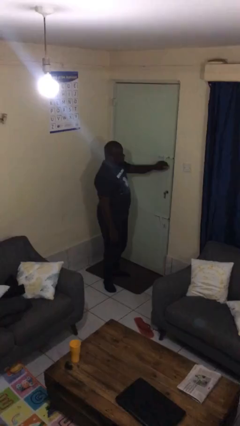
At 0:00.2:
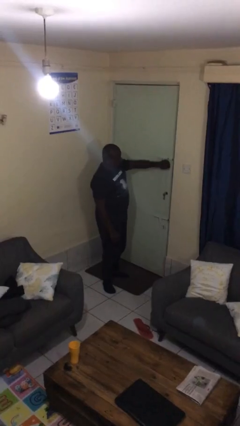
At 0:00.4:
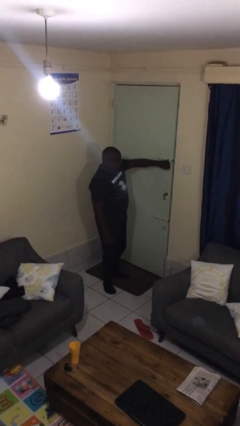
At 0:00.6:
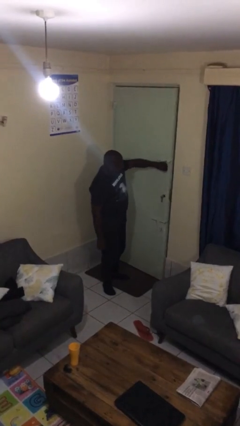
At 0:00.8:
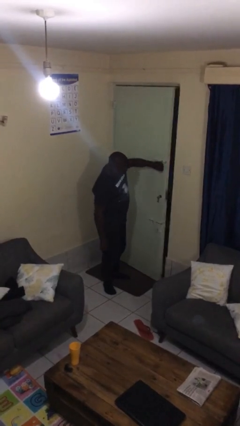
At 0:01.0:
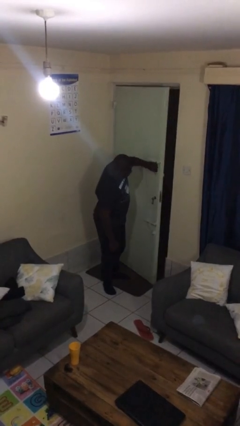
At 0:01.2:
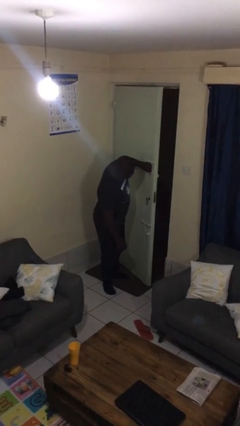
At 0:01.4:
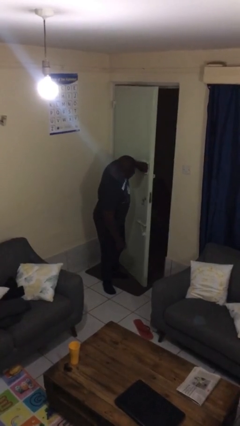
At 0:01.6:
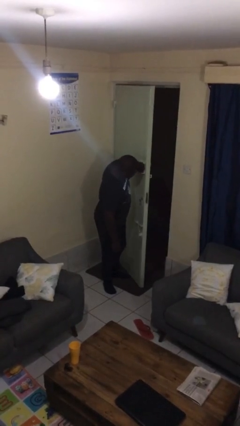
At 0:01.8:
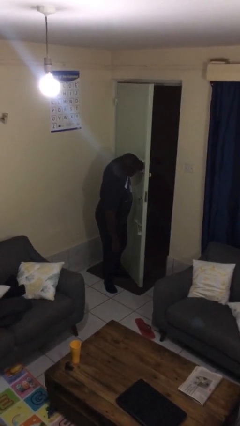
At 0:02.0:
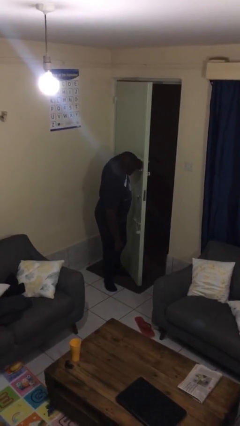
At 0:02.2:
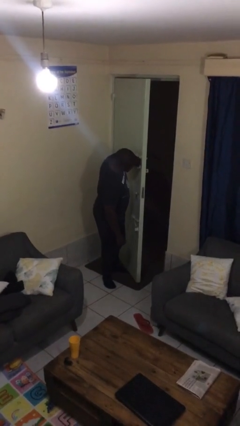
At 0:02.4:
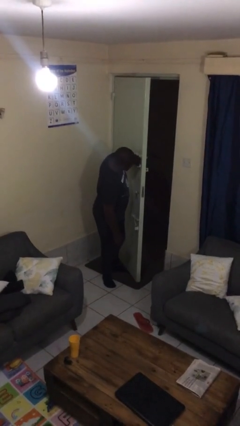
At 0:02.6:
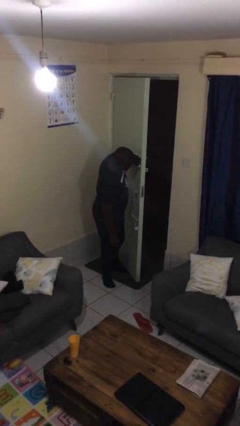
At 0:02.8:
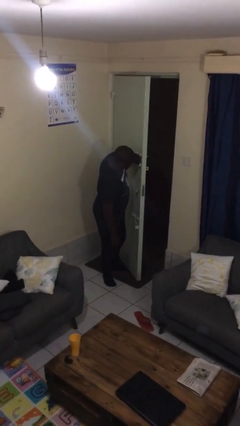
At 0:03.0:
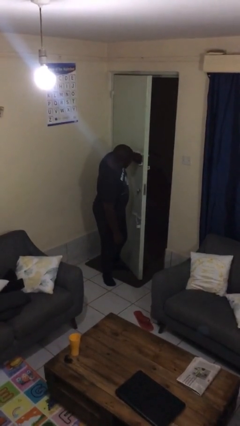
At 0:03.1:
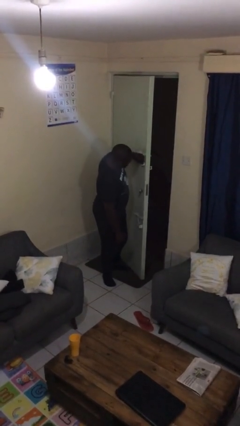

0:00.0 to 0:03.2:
person opens facility door

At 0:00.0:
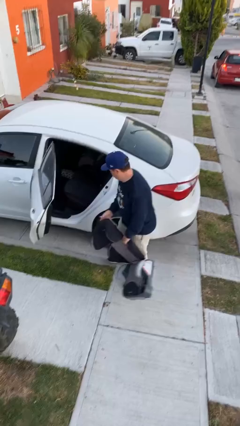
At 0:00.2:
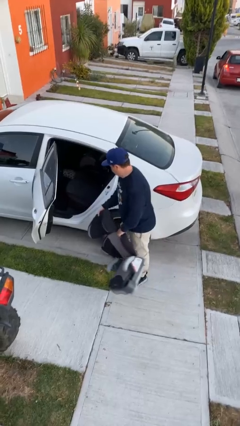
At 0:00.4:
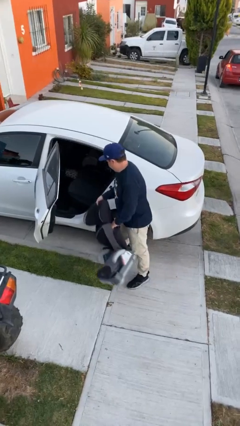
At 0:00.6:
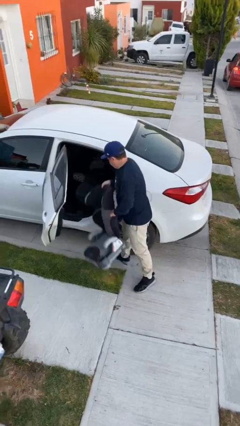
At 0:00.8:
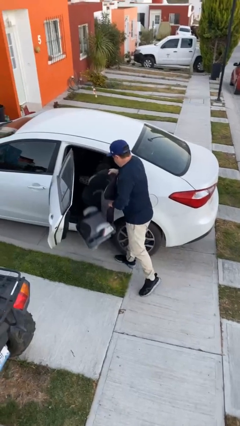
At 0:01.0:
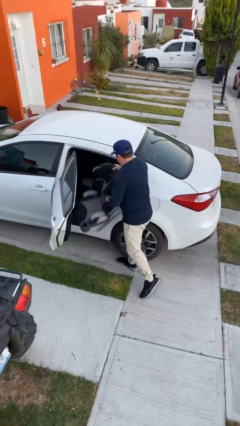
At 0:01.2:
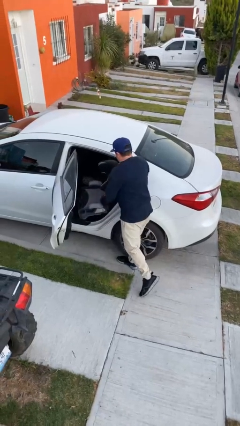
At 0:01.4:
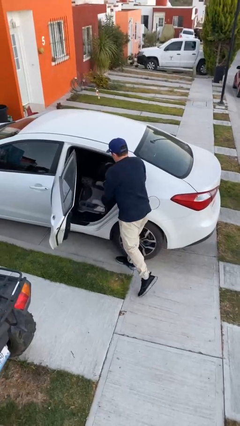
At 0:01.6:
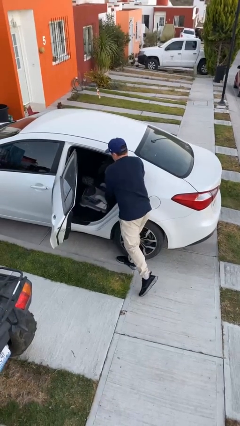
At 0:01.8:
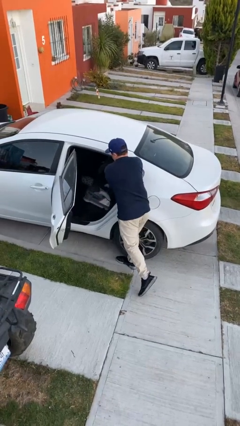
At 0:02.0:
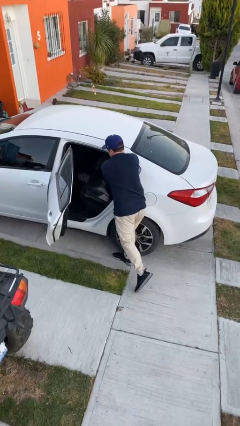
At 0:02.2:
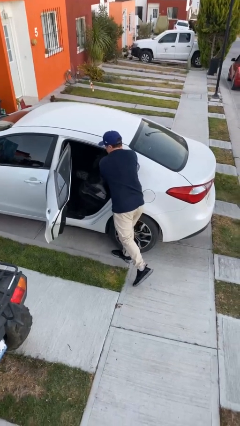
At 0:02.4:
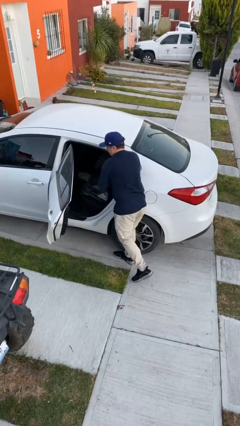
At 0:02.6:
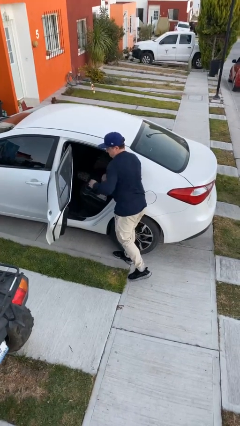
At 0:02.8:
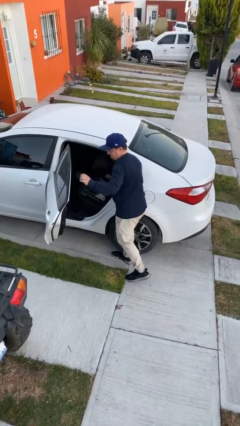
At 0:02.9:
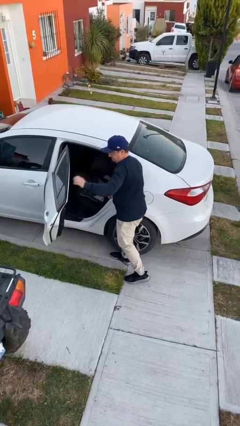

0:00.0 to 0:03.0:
person loads car

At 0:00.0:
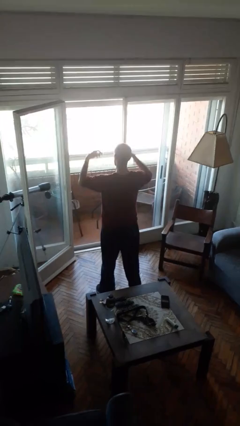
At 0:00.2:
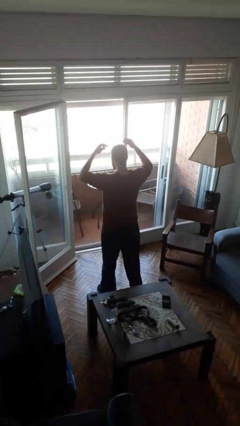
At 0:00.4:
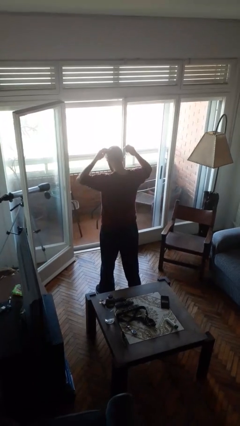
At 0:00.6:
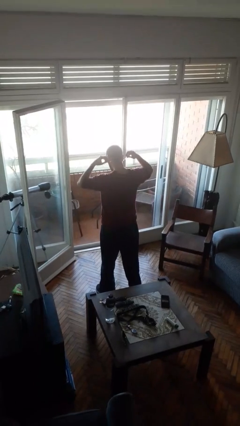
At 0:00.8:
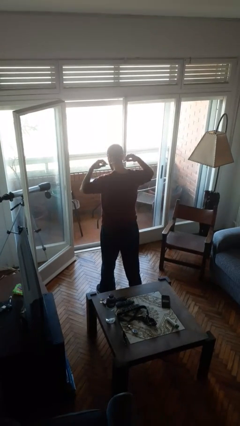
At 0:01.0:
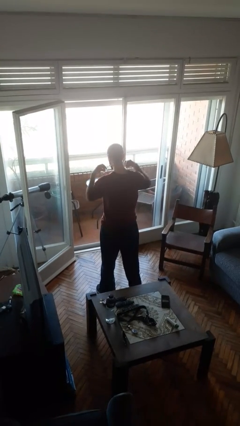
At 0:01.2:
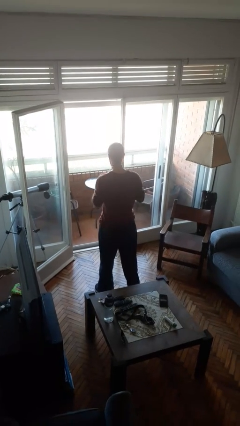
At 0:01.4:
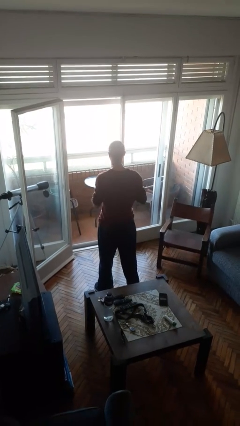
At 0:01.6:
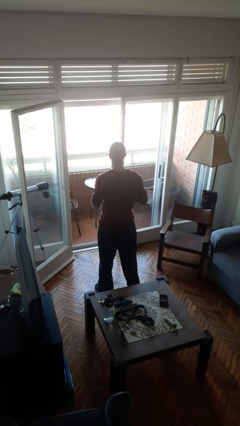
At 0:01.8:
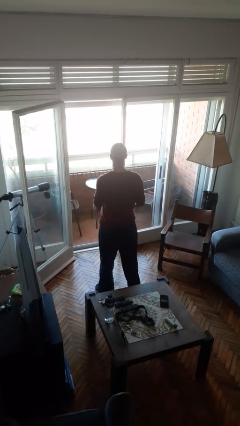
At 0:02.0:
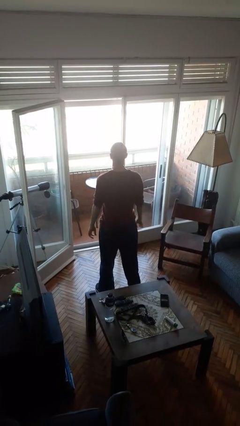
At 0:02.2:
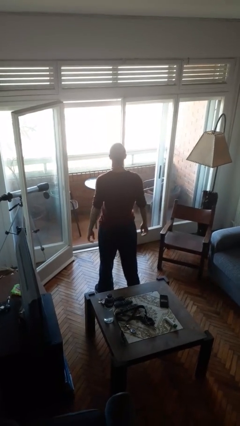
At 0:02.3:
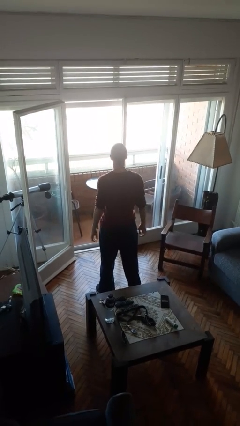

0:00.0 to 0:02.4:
person puts on necklace

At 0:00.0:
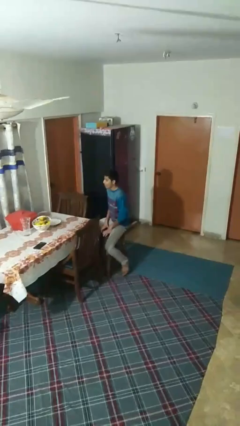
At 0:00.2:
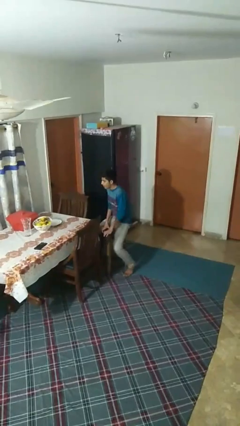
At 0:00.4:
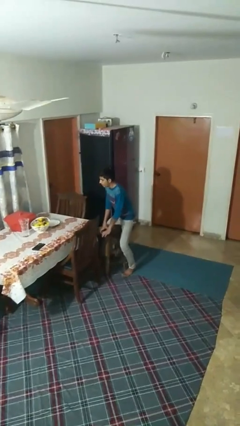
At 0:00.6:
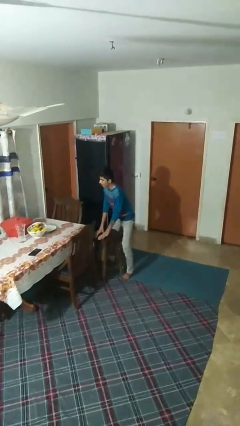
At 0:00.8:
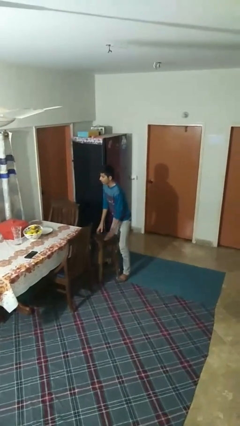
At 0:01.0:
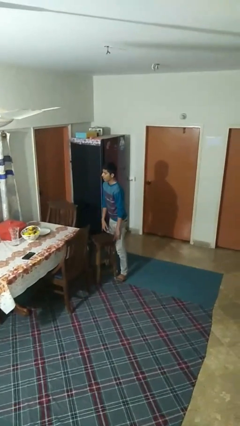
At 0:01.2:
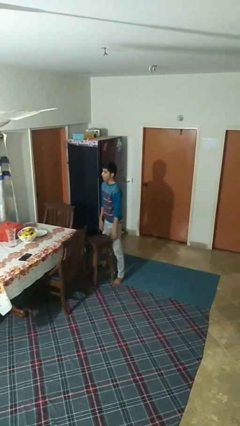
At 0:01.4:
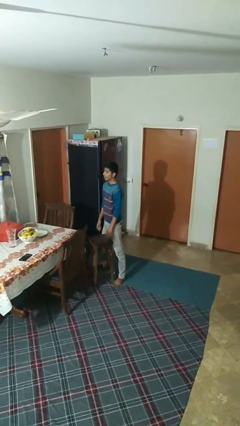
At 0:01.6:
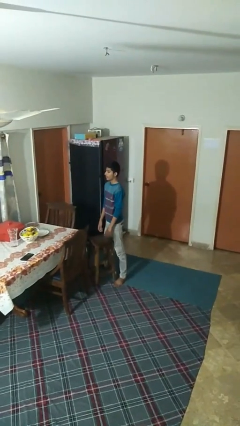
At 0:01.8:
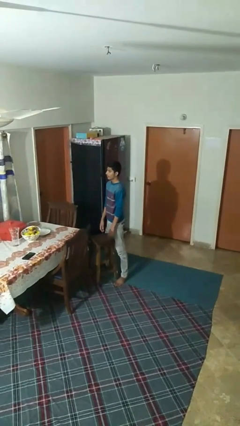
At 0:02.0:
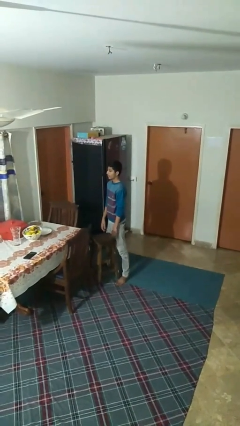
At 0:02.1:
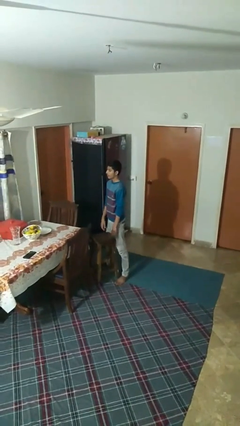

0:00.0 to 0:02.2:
person stands up

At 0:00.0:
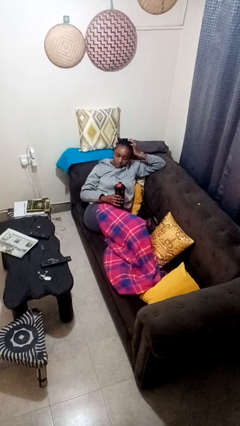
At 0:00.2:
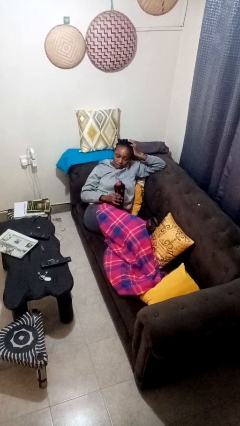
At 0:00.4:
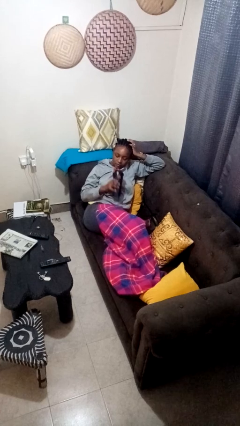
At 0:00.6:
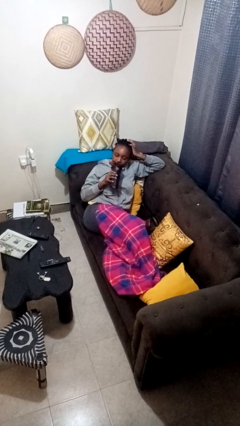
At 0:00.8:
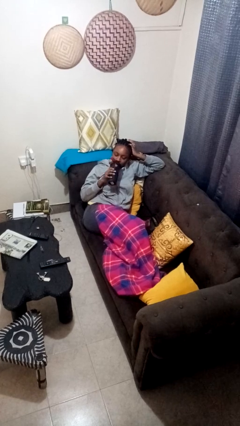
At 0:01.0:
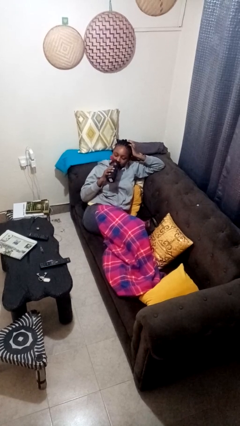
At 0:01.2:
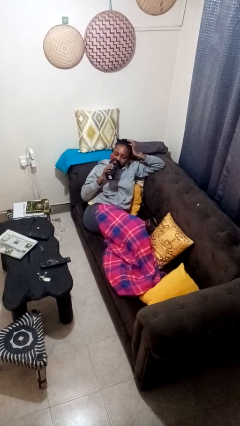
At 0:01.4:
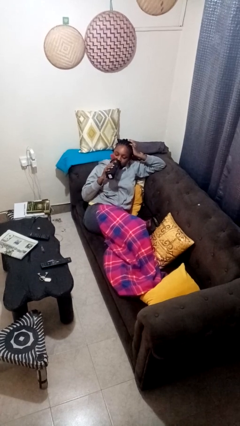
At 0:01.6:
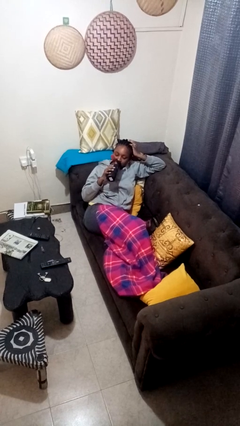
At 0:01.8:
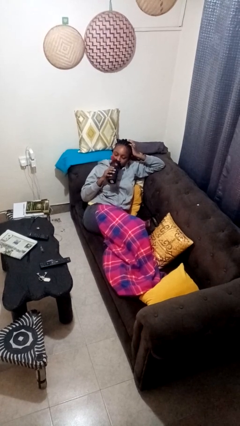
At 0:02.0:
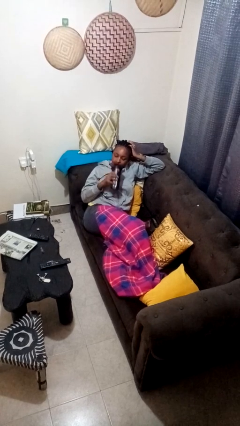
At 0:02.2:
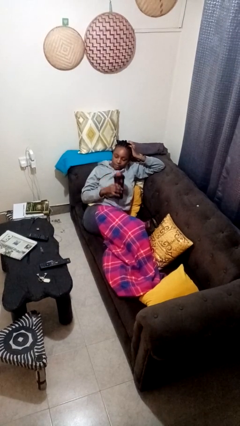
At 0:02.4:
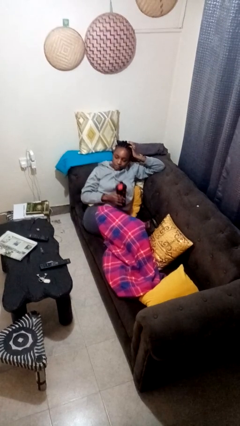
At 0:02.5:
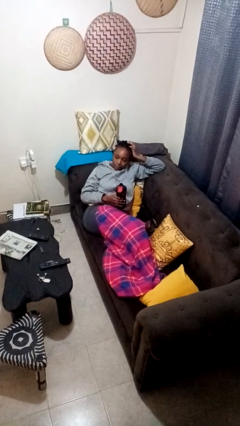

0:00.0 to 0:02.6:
person drinks from bottle

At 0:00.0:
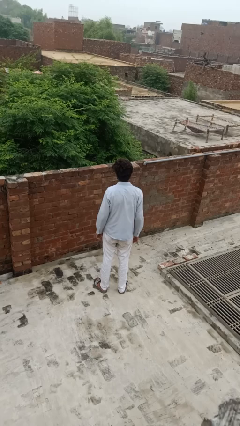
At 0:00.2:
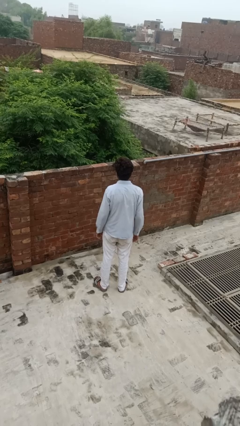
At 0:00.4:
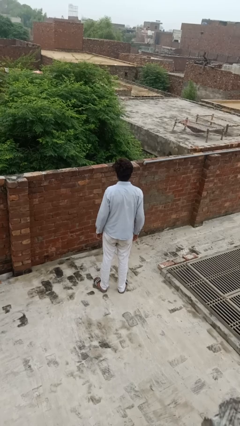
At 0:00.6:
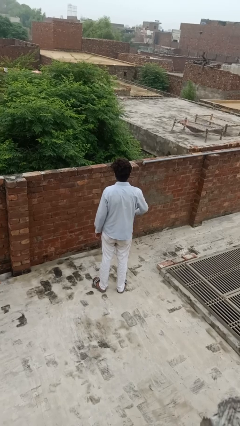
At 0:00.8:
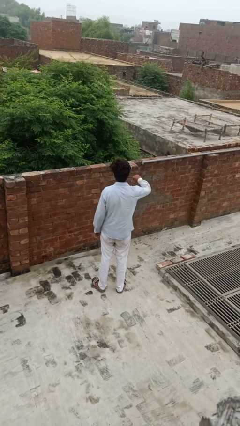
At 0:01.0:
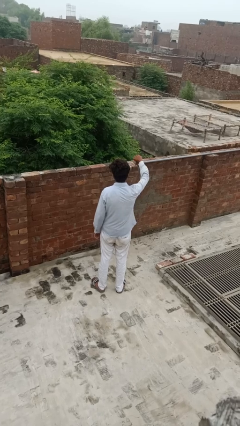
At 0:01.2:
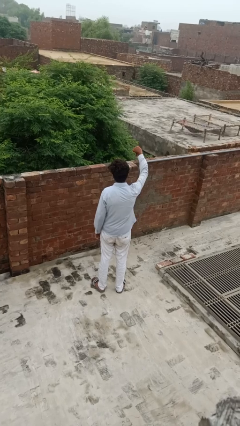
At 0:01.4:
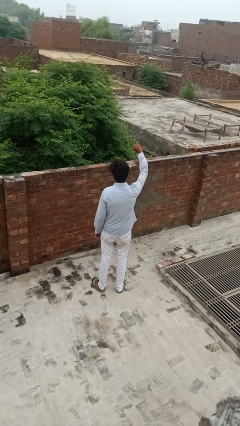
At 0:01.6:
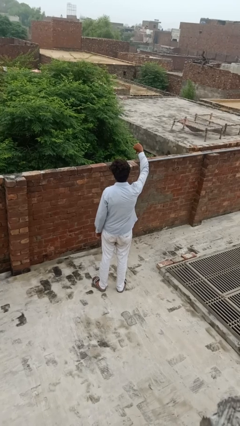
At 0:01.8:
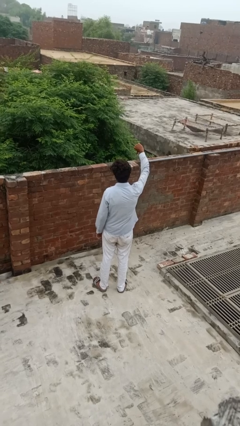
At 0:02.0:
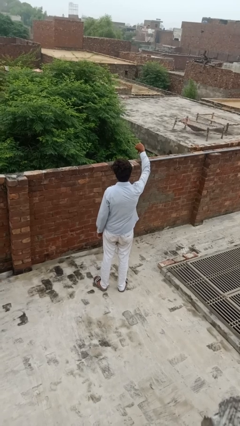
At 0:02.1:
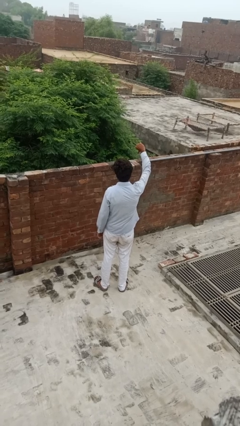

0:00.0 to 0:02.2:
person gestures thumbs down

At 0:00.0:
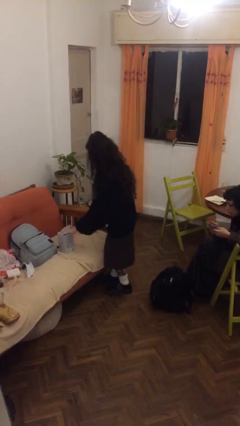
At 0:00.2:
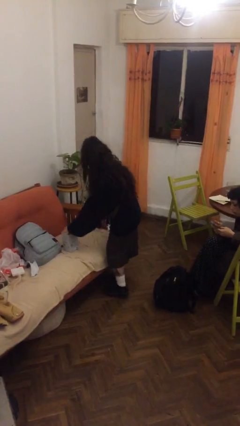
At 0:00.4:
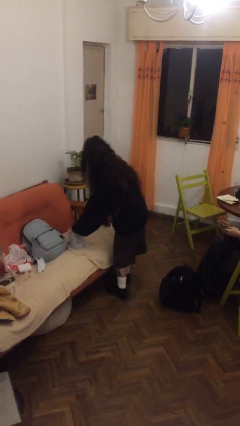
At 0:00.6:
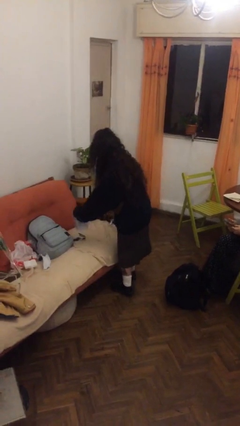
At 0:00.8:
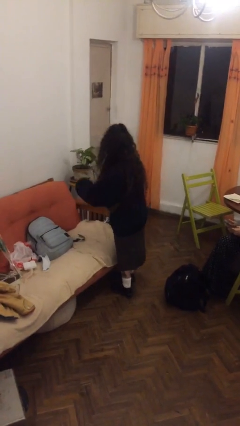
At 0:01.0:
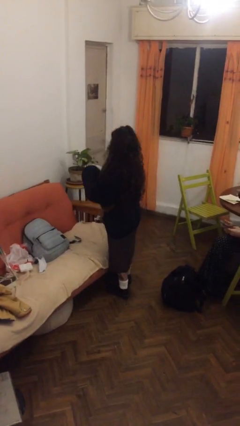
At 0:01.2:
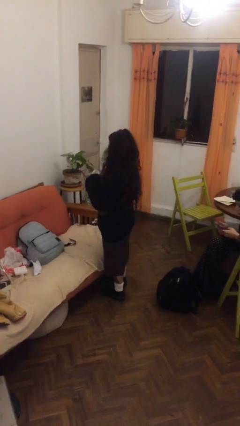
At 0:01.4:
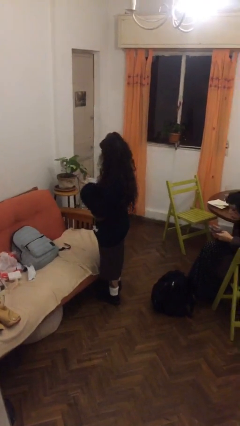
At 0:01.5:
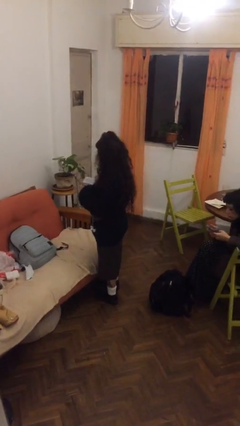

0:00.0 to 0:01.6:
person picks up object from couch
